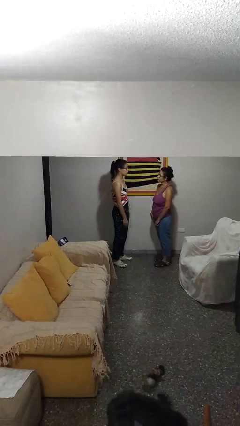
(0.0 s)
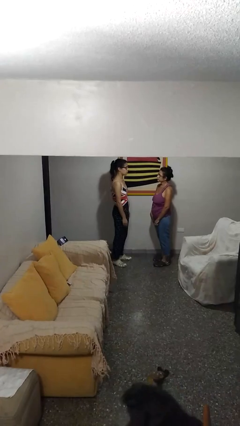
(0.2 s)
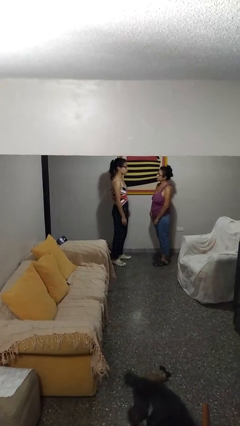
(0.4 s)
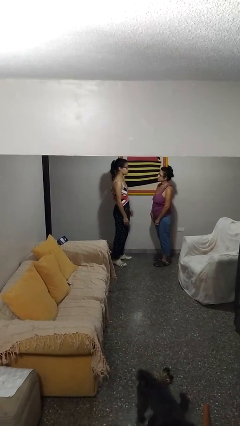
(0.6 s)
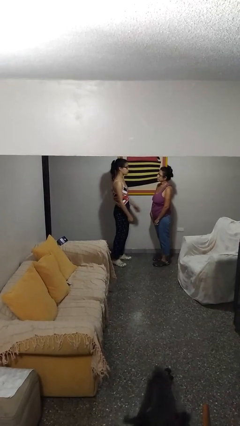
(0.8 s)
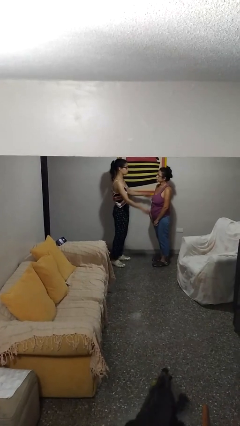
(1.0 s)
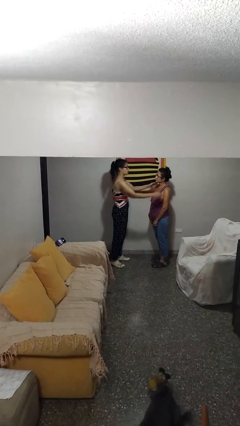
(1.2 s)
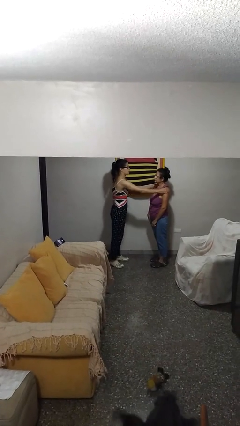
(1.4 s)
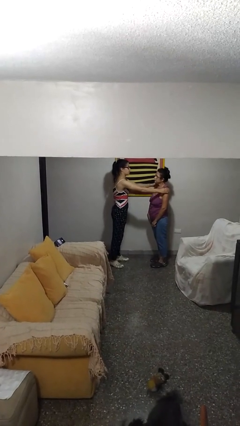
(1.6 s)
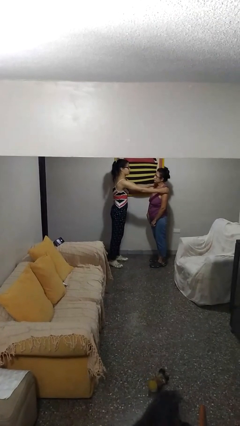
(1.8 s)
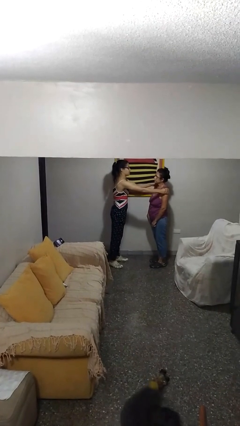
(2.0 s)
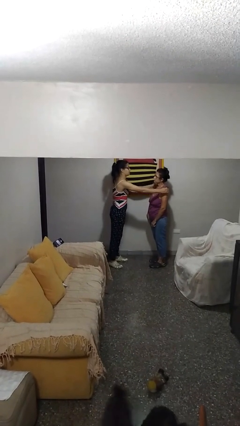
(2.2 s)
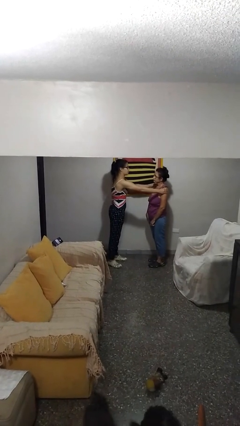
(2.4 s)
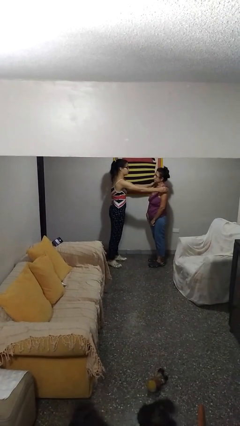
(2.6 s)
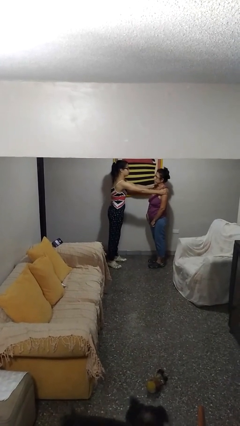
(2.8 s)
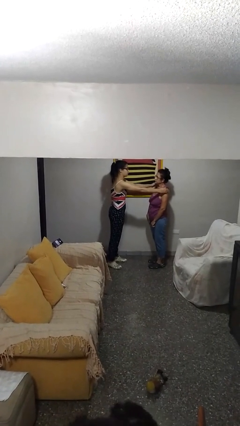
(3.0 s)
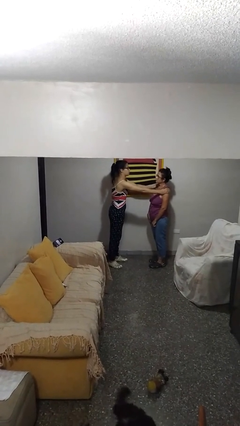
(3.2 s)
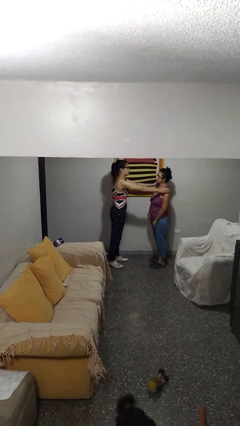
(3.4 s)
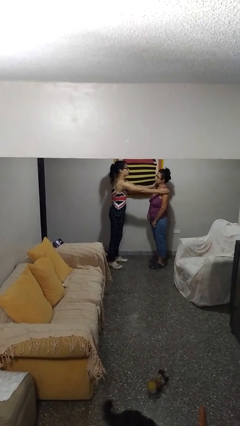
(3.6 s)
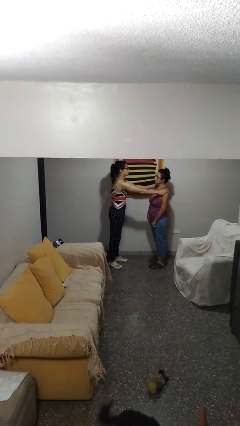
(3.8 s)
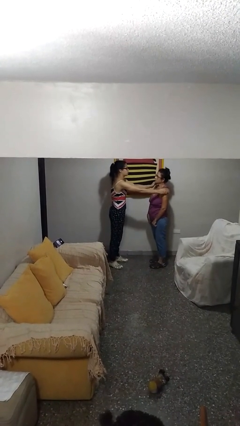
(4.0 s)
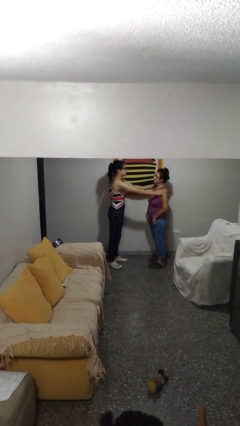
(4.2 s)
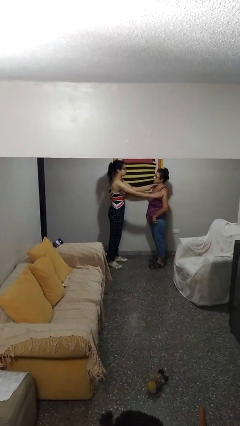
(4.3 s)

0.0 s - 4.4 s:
person pounds shoulders of person

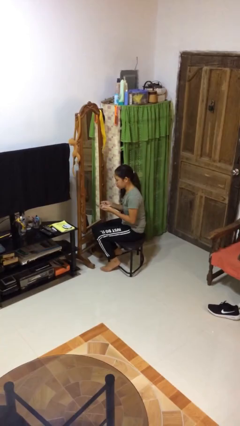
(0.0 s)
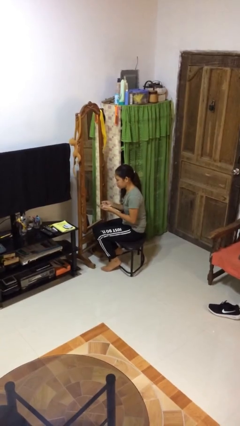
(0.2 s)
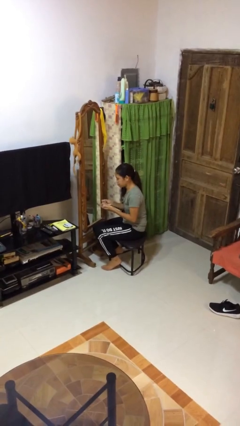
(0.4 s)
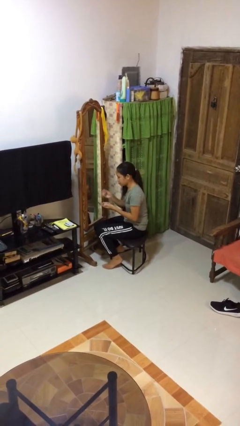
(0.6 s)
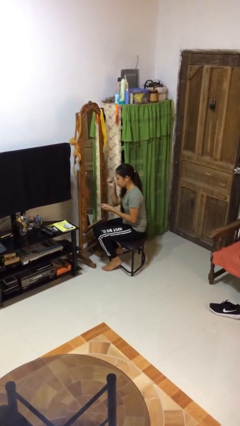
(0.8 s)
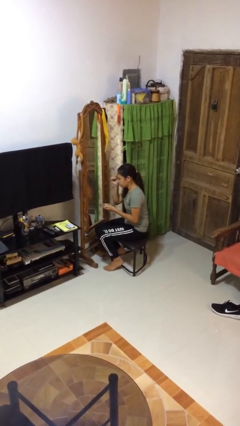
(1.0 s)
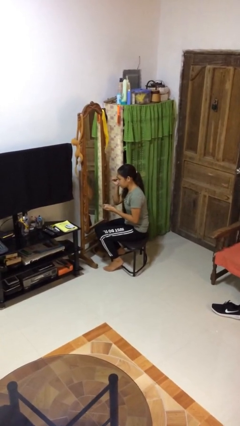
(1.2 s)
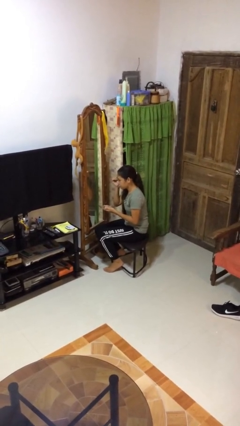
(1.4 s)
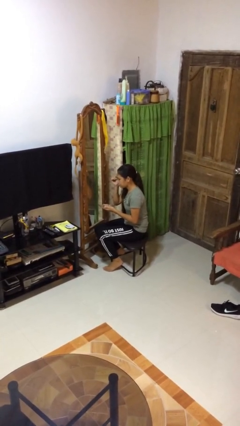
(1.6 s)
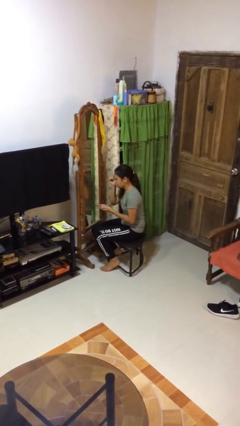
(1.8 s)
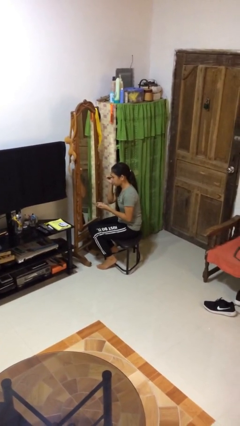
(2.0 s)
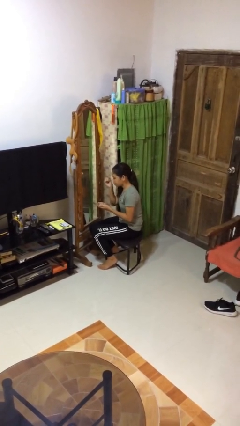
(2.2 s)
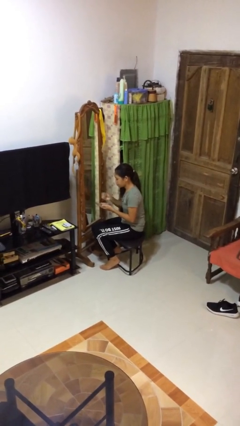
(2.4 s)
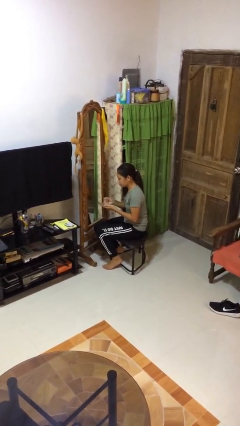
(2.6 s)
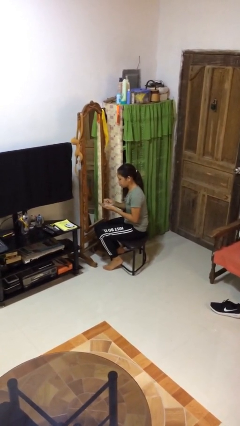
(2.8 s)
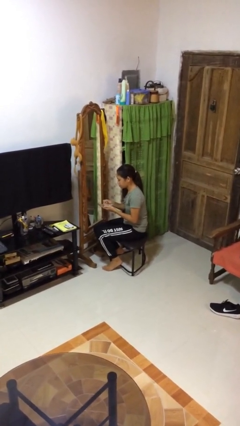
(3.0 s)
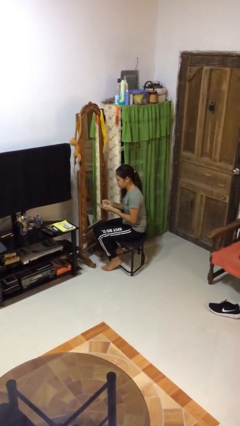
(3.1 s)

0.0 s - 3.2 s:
person applies eye makeup

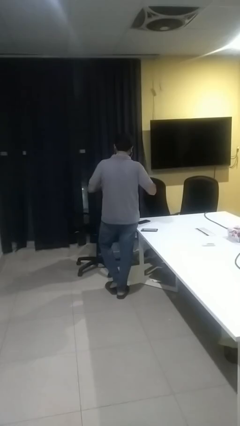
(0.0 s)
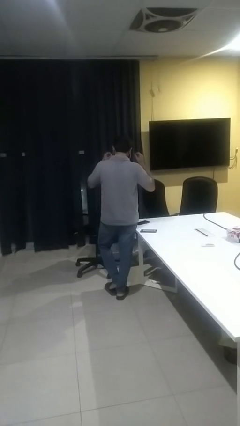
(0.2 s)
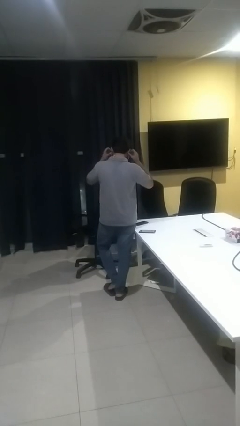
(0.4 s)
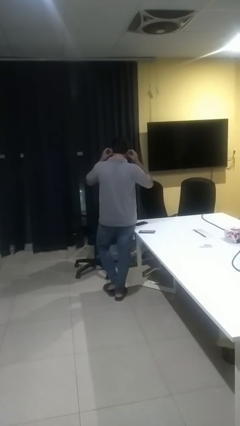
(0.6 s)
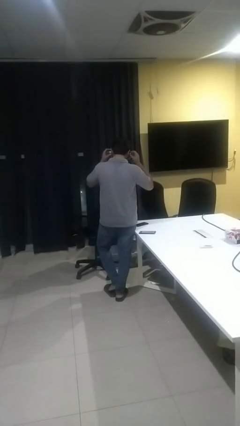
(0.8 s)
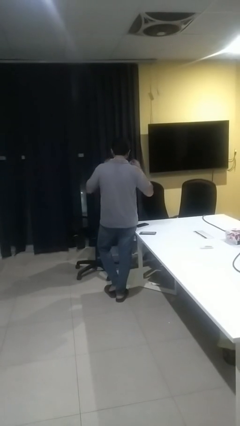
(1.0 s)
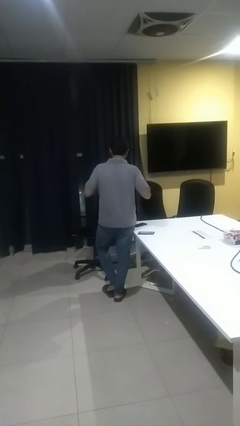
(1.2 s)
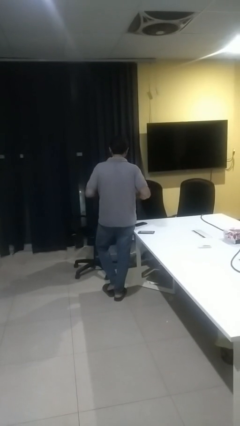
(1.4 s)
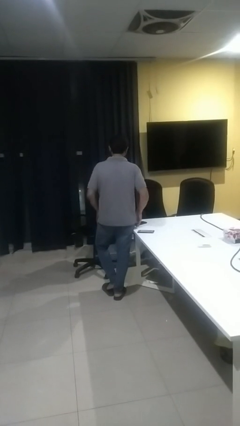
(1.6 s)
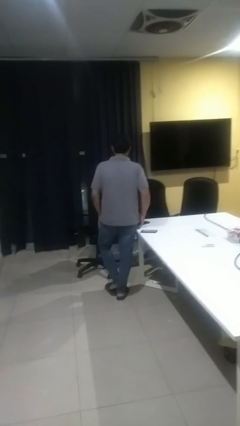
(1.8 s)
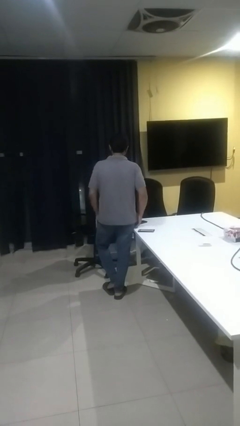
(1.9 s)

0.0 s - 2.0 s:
person takes off headphones

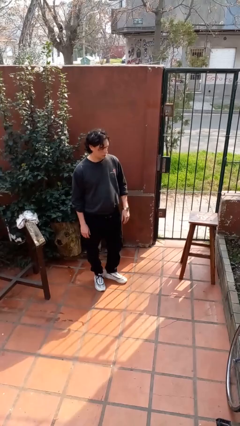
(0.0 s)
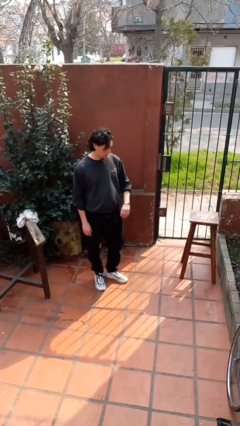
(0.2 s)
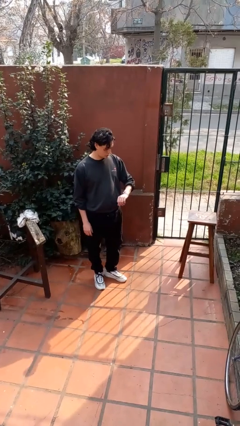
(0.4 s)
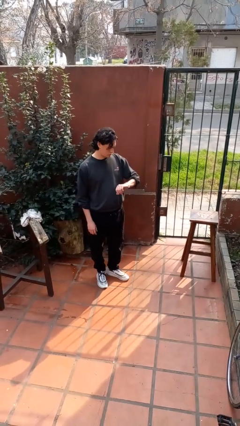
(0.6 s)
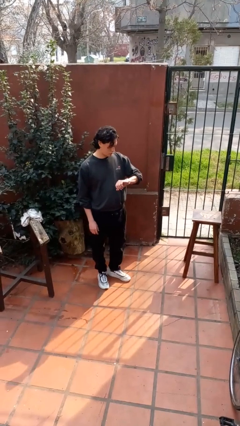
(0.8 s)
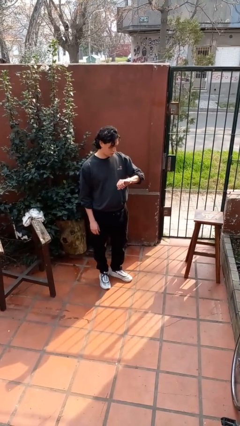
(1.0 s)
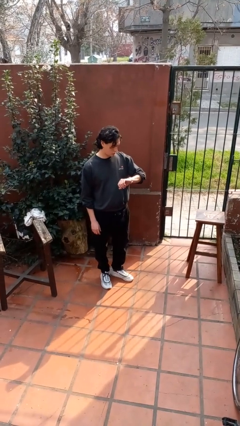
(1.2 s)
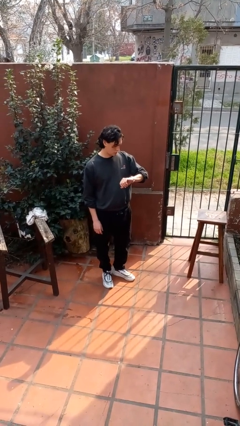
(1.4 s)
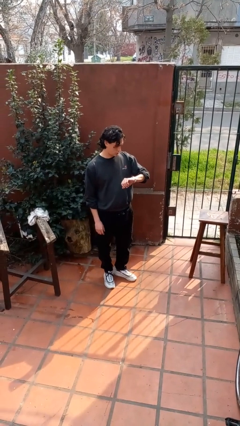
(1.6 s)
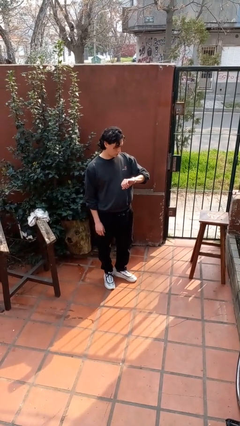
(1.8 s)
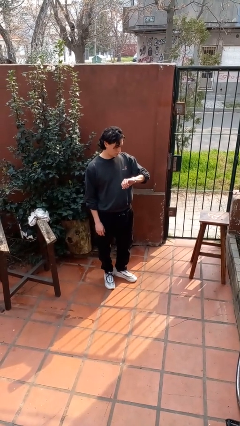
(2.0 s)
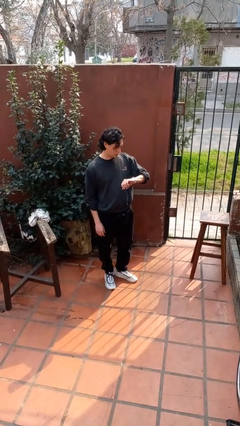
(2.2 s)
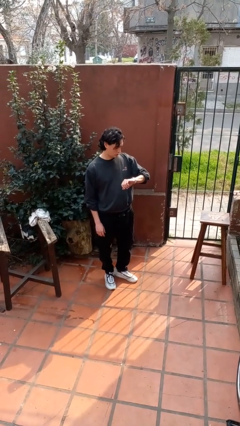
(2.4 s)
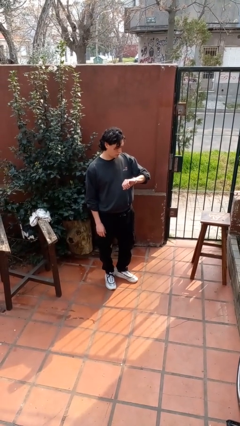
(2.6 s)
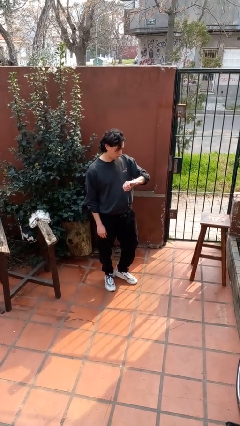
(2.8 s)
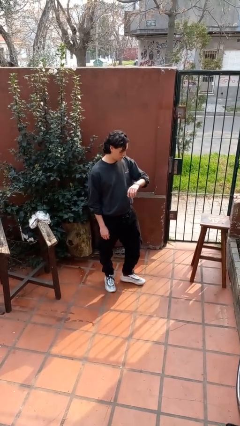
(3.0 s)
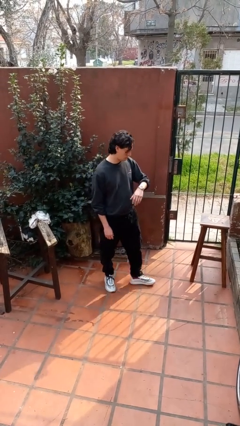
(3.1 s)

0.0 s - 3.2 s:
person looks at wristwatch

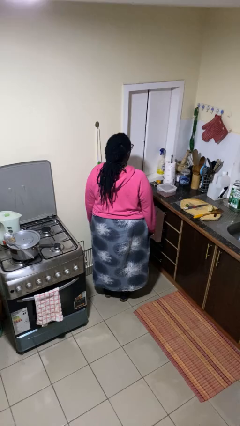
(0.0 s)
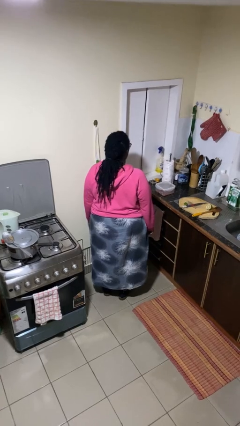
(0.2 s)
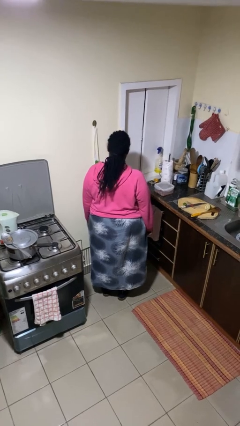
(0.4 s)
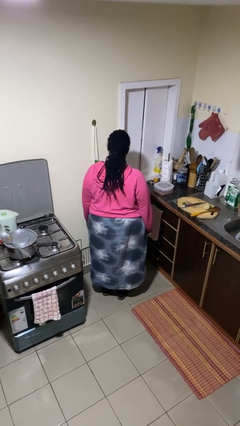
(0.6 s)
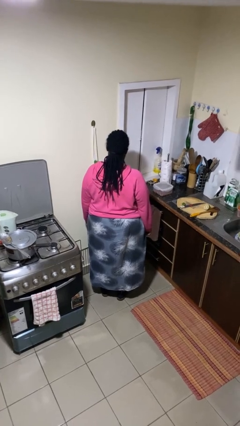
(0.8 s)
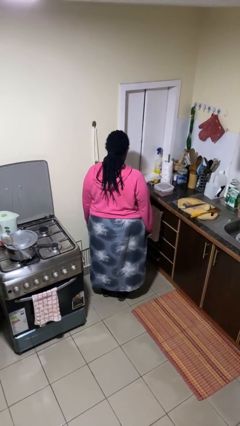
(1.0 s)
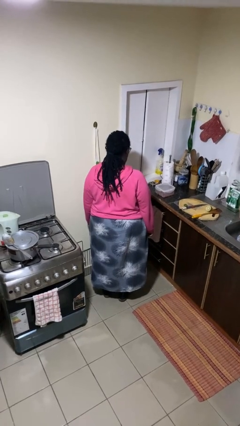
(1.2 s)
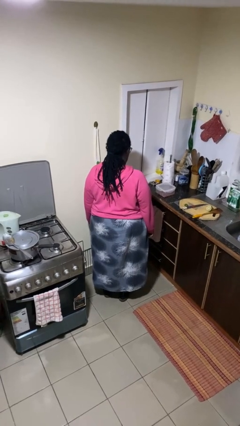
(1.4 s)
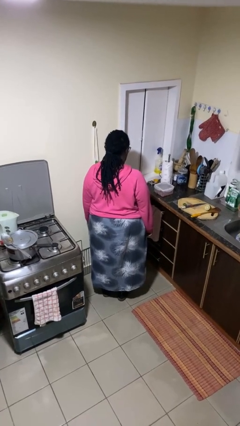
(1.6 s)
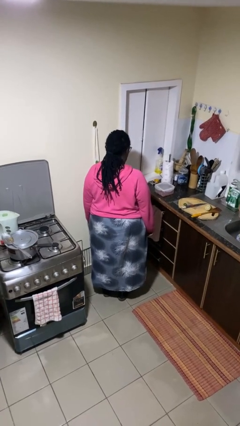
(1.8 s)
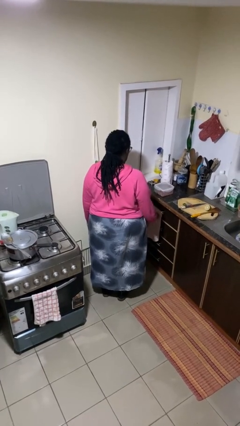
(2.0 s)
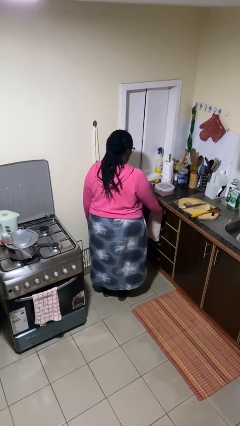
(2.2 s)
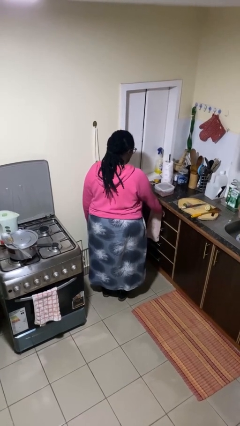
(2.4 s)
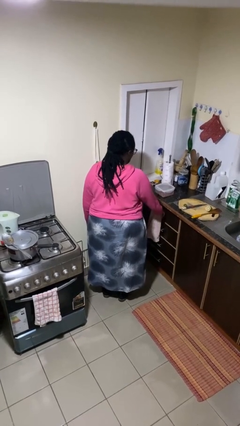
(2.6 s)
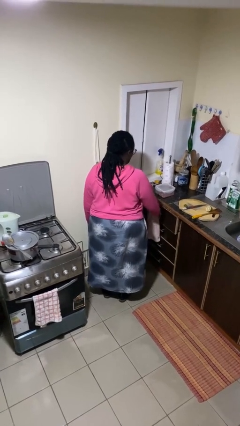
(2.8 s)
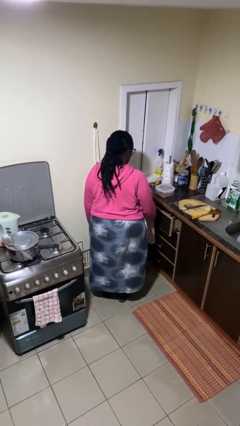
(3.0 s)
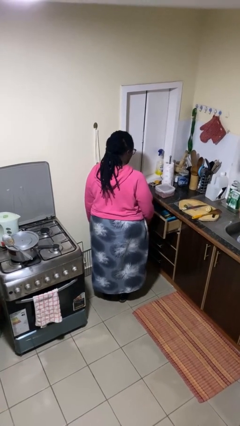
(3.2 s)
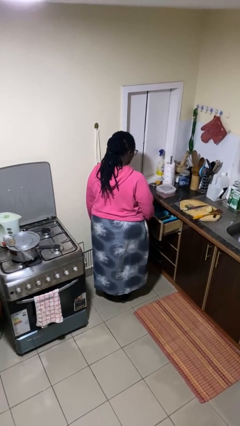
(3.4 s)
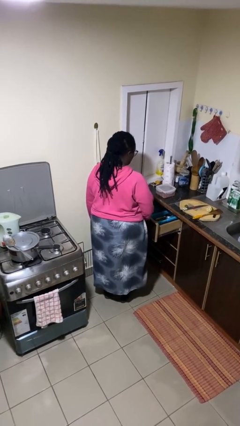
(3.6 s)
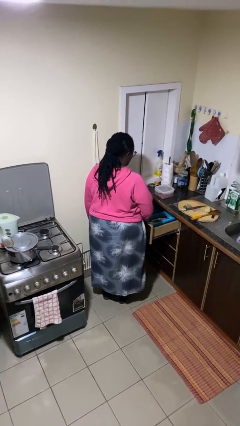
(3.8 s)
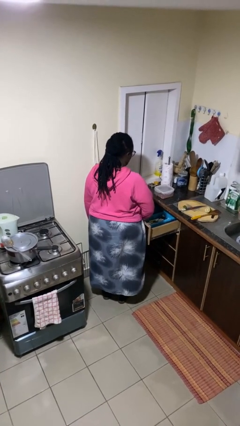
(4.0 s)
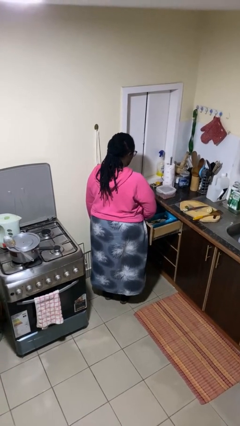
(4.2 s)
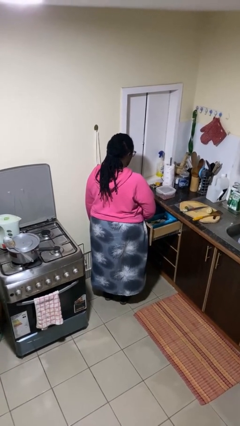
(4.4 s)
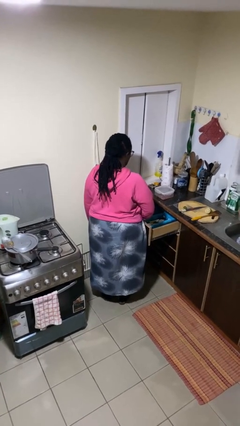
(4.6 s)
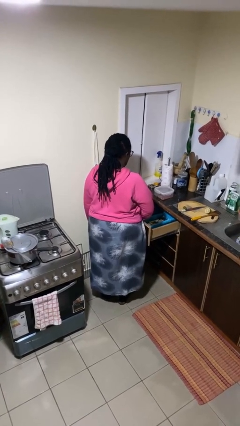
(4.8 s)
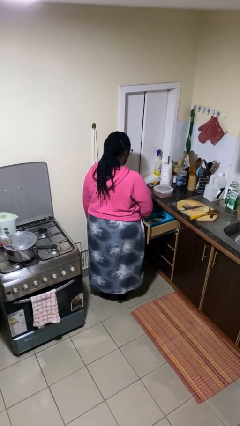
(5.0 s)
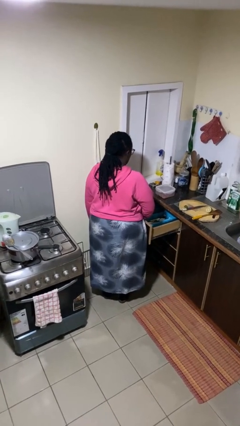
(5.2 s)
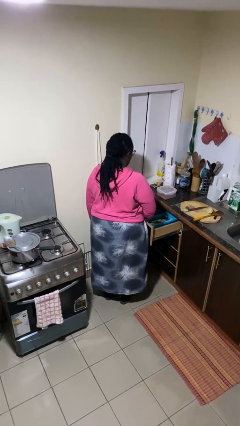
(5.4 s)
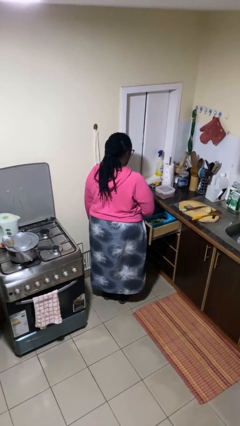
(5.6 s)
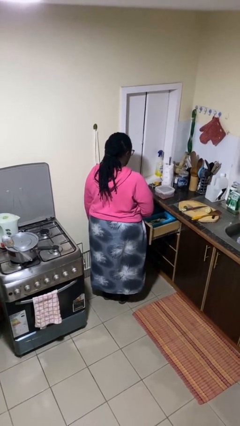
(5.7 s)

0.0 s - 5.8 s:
person opens kitchen drawer
